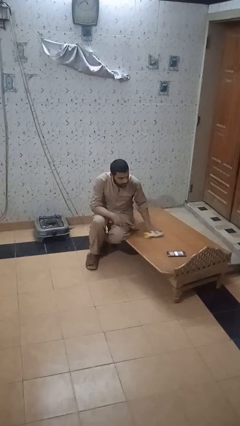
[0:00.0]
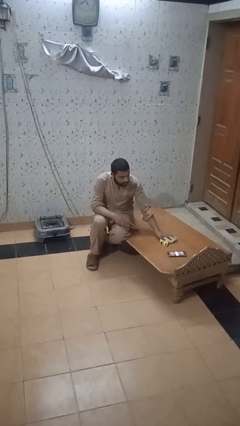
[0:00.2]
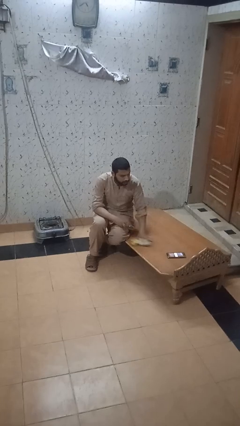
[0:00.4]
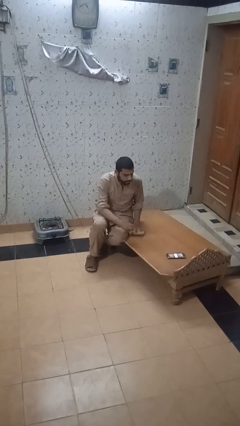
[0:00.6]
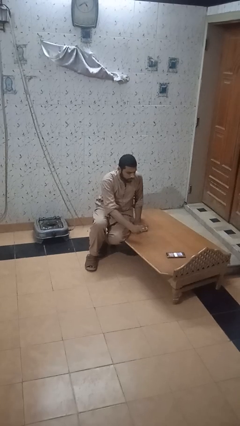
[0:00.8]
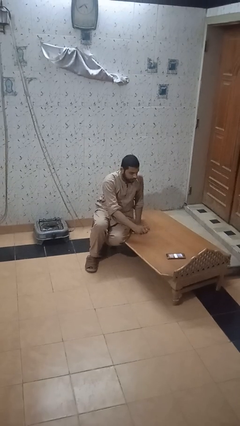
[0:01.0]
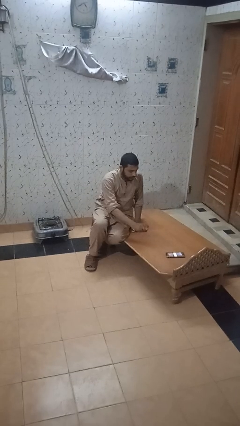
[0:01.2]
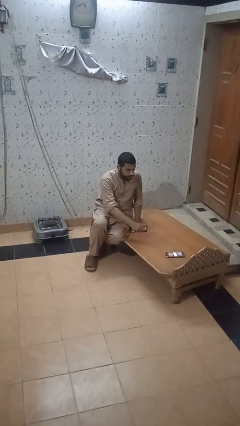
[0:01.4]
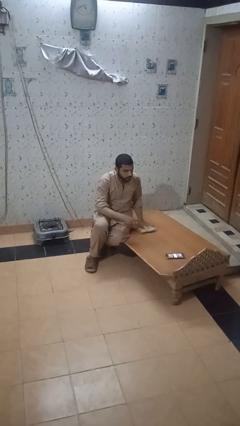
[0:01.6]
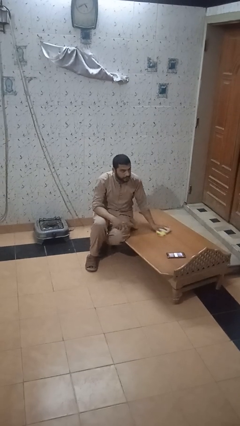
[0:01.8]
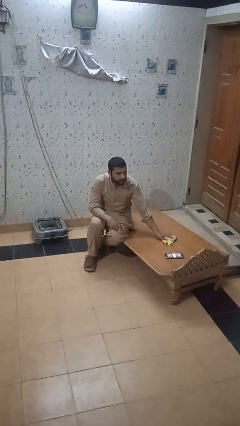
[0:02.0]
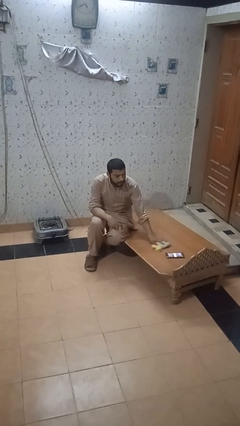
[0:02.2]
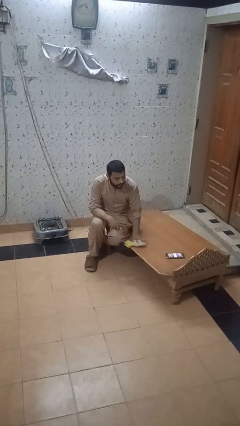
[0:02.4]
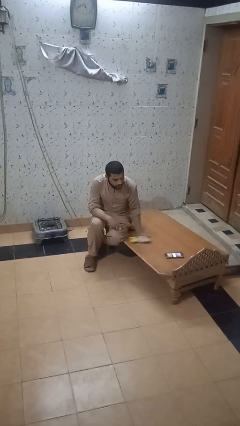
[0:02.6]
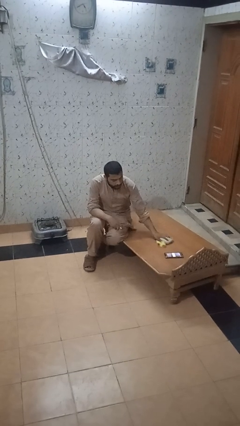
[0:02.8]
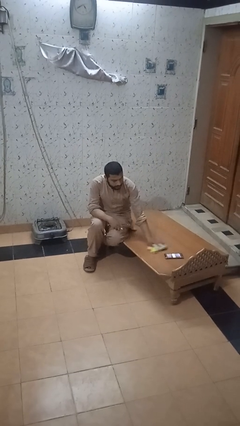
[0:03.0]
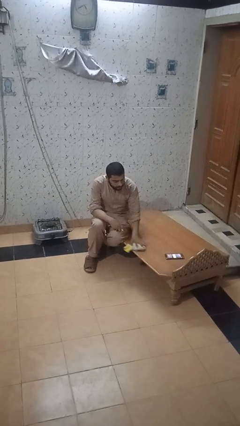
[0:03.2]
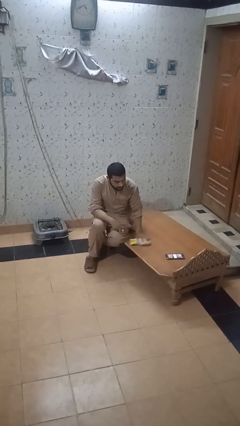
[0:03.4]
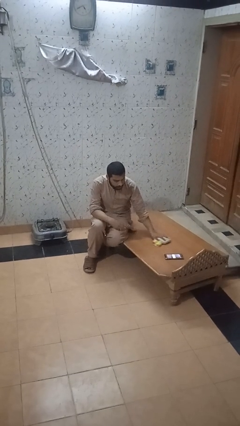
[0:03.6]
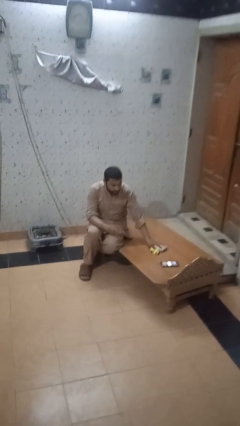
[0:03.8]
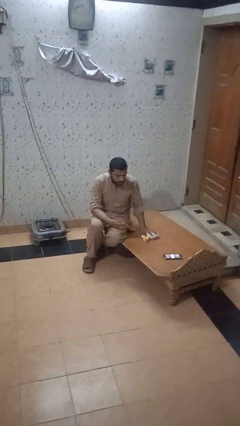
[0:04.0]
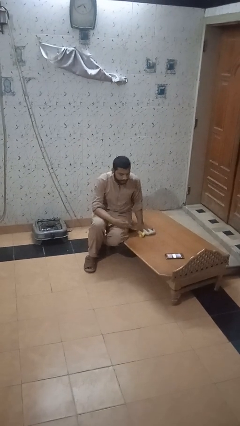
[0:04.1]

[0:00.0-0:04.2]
person sprays from bottle

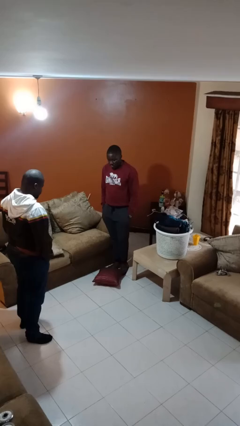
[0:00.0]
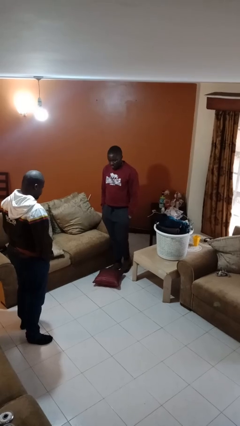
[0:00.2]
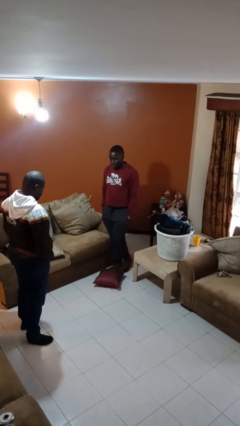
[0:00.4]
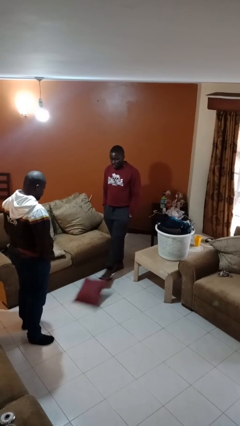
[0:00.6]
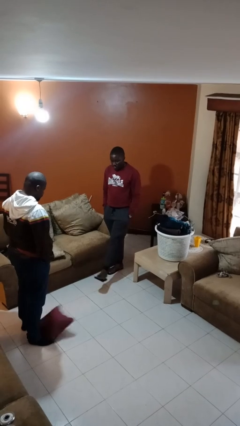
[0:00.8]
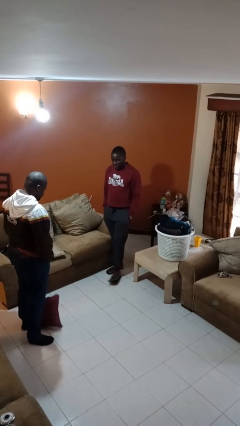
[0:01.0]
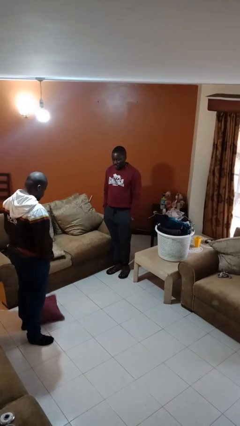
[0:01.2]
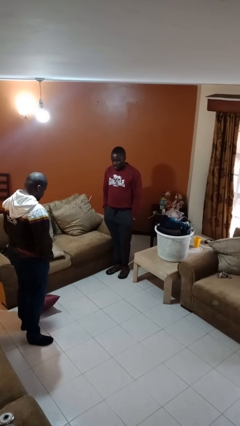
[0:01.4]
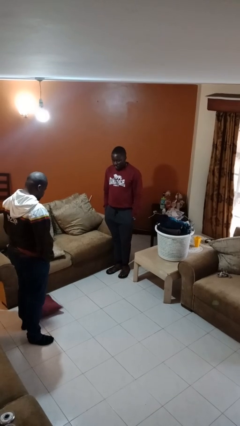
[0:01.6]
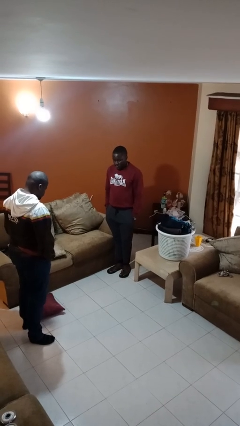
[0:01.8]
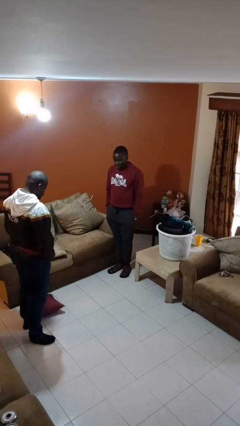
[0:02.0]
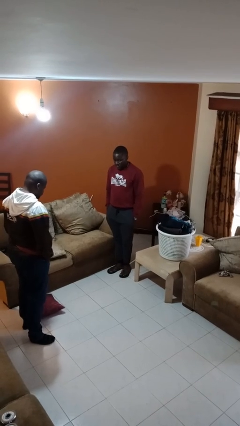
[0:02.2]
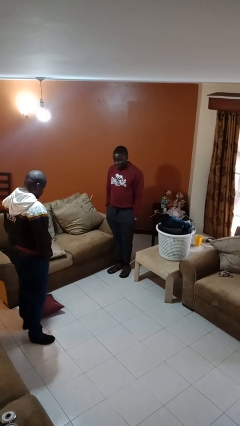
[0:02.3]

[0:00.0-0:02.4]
person kicks object to person

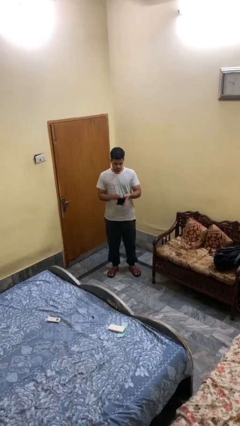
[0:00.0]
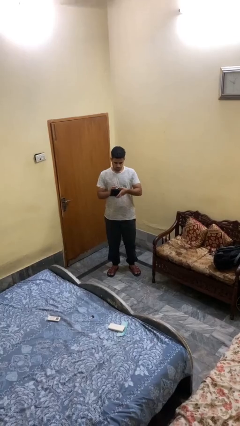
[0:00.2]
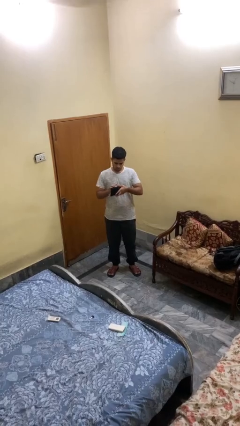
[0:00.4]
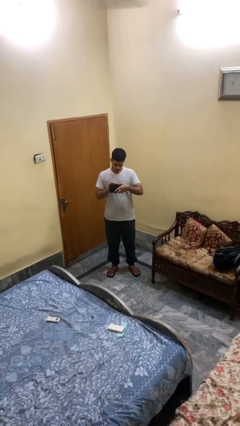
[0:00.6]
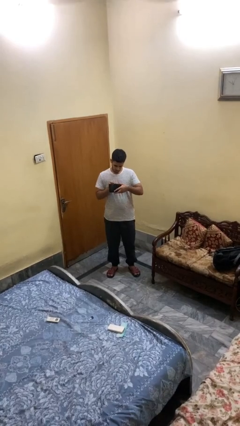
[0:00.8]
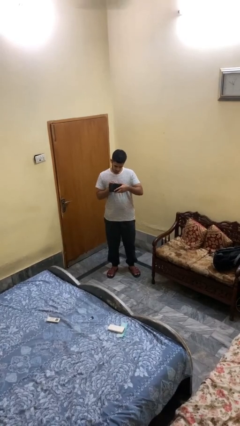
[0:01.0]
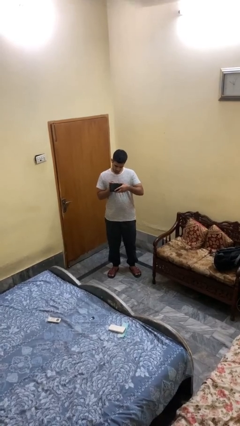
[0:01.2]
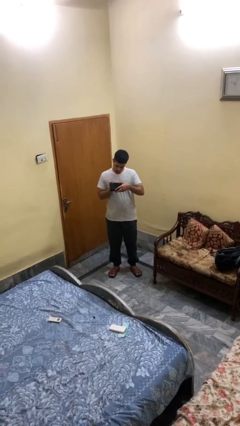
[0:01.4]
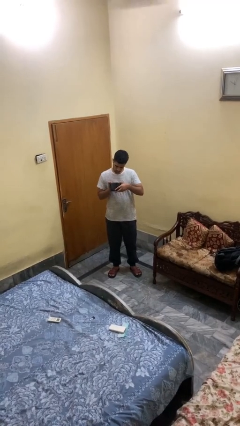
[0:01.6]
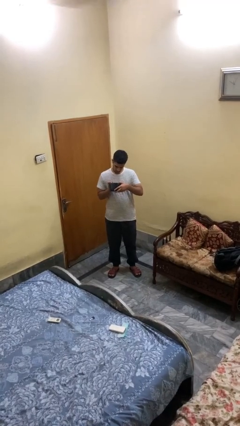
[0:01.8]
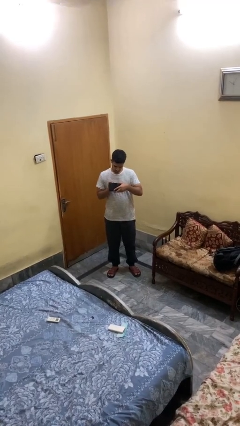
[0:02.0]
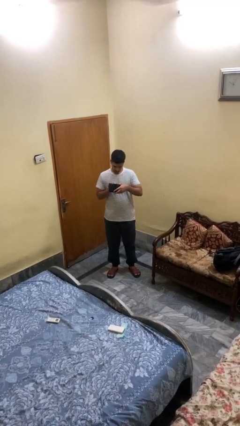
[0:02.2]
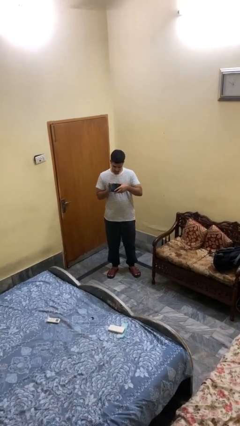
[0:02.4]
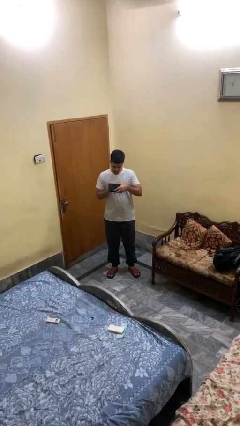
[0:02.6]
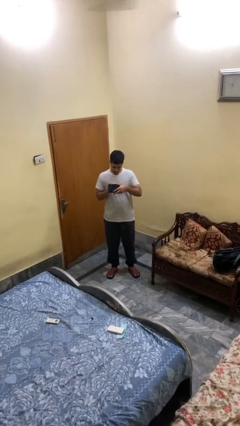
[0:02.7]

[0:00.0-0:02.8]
person searches in purse

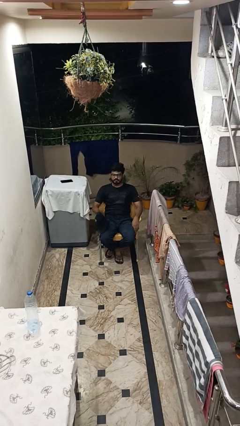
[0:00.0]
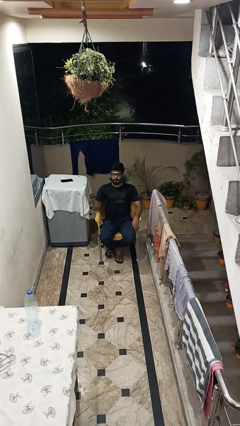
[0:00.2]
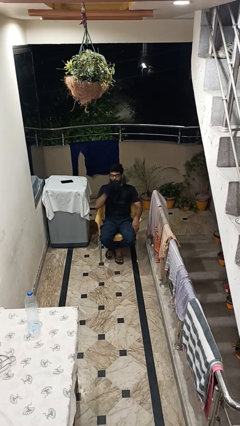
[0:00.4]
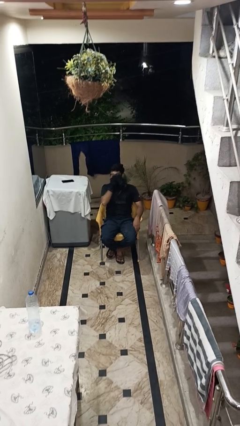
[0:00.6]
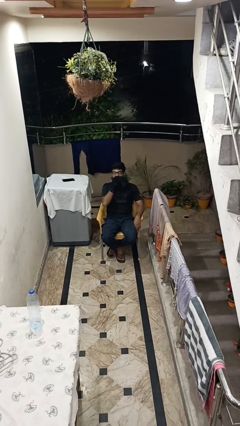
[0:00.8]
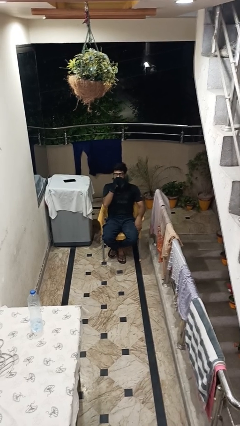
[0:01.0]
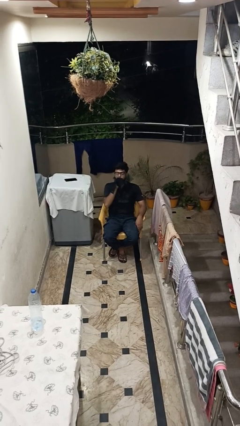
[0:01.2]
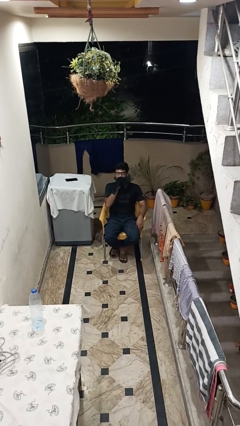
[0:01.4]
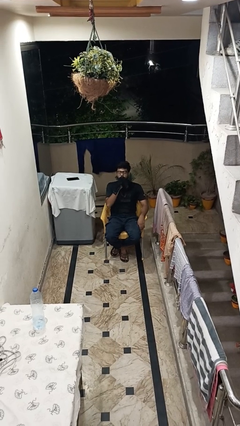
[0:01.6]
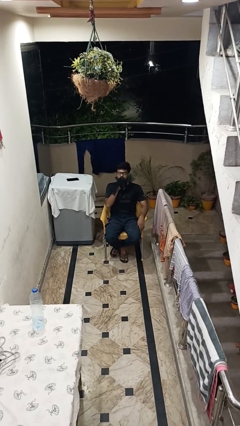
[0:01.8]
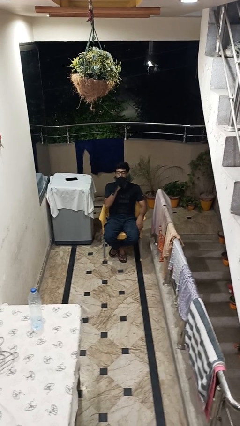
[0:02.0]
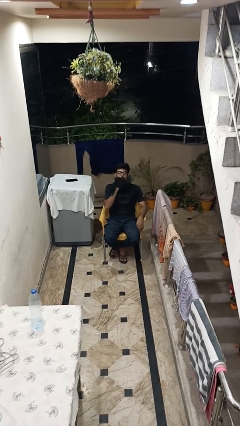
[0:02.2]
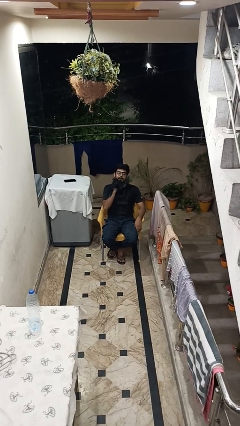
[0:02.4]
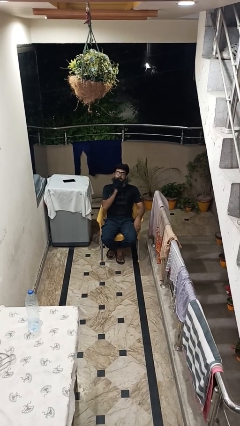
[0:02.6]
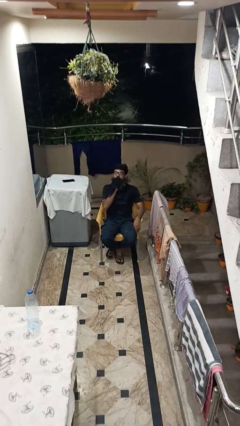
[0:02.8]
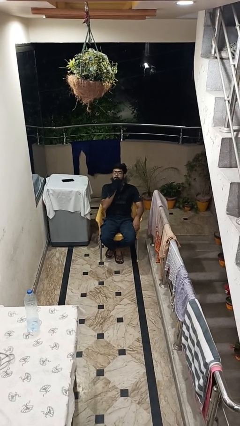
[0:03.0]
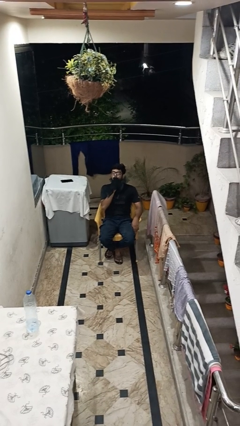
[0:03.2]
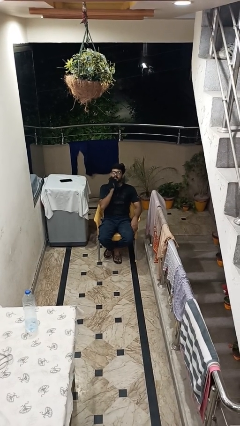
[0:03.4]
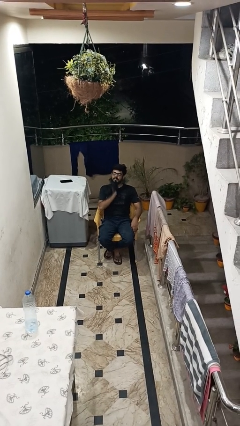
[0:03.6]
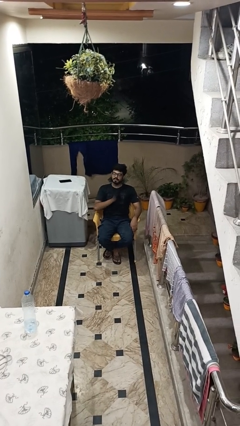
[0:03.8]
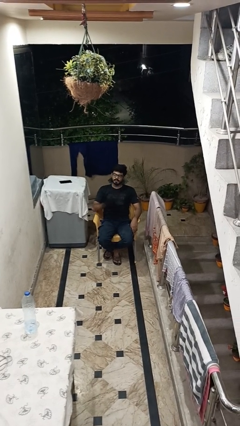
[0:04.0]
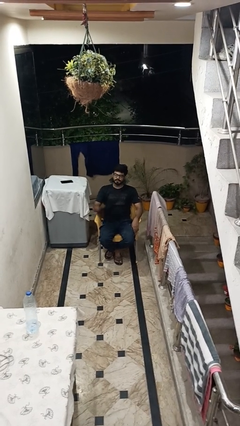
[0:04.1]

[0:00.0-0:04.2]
person wipes mouth with napkin

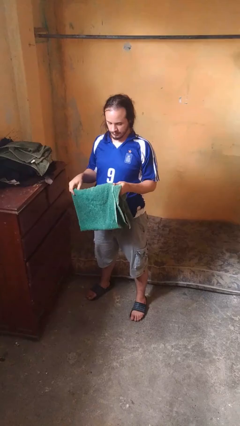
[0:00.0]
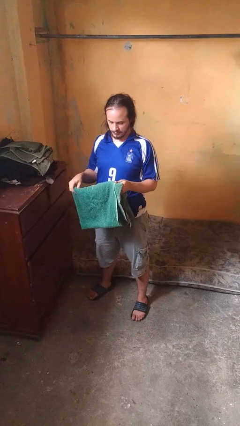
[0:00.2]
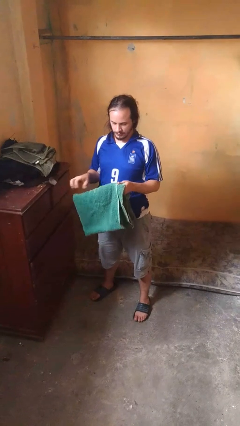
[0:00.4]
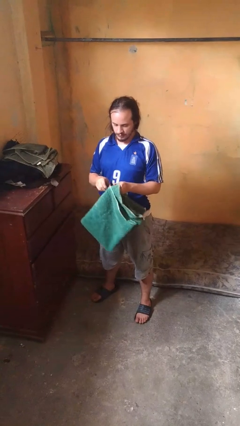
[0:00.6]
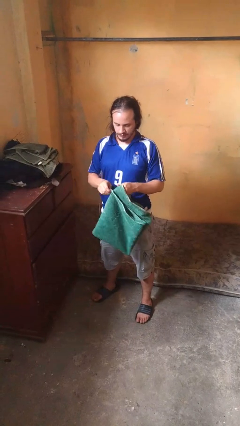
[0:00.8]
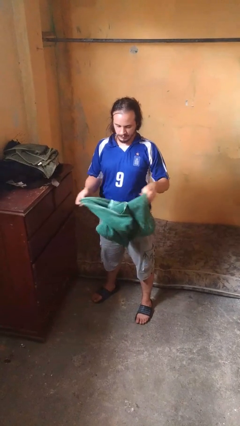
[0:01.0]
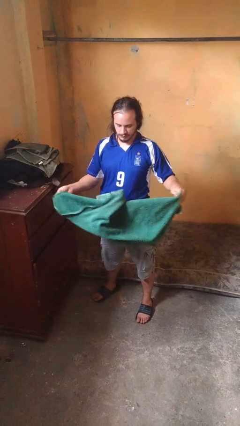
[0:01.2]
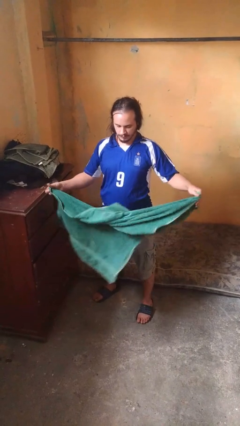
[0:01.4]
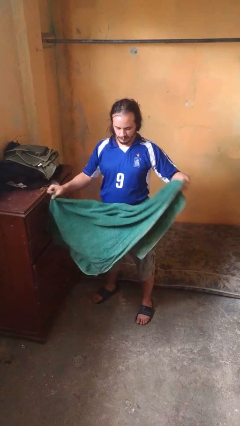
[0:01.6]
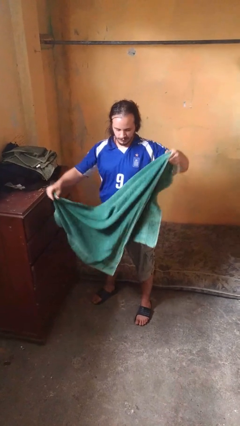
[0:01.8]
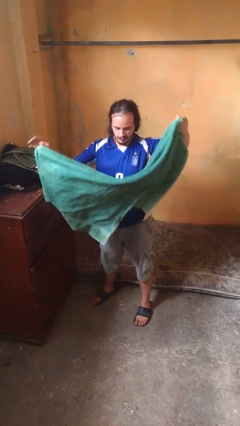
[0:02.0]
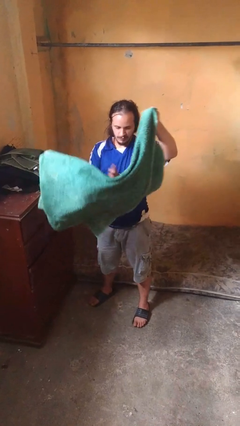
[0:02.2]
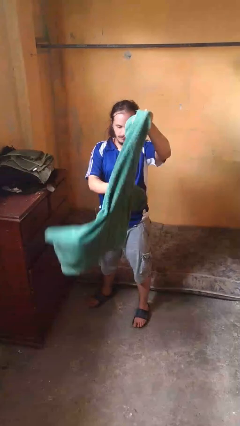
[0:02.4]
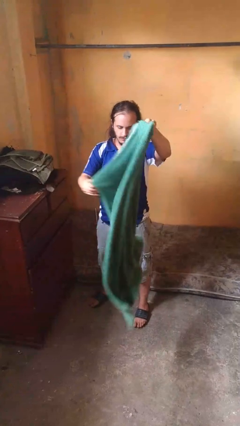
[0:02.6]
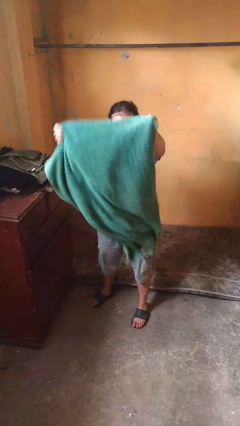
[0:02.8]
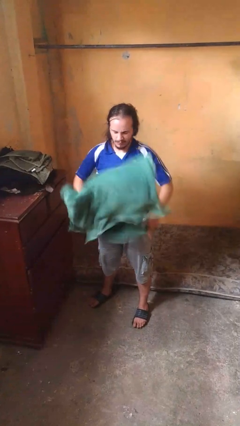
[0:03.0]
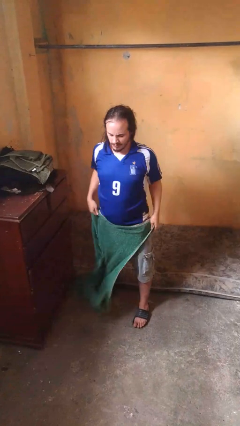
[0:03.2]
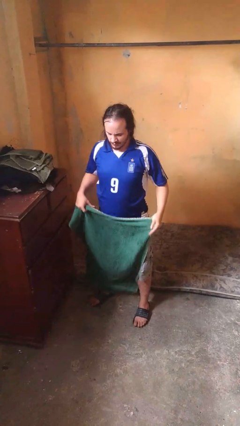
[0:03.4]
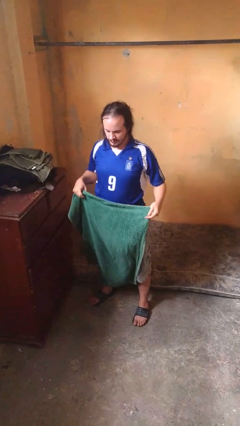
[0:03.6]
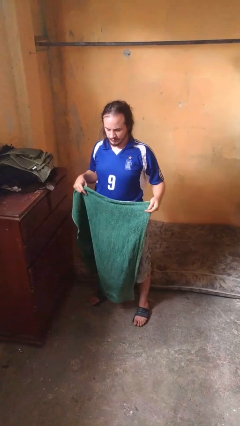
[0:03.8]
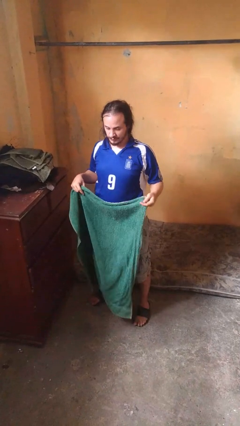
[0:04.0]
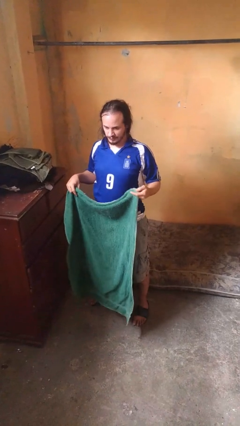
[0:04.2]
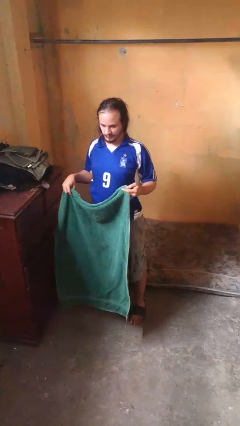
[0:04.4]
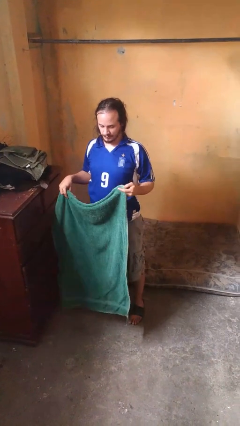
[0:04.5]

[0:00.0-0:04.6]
person unfolds blanket
